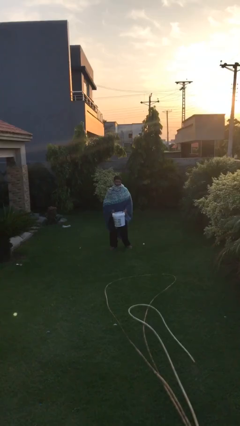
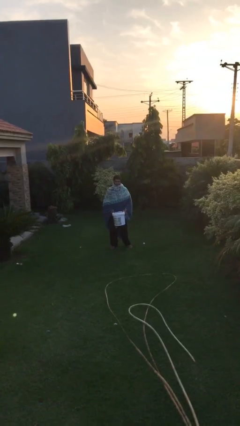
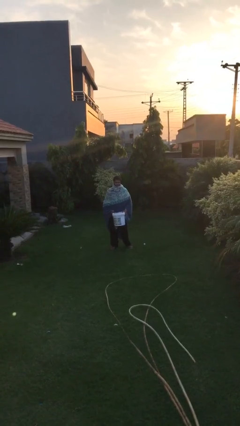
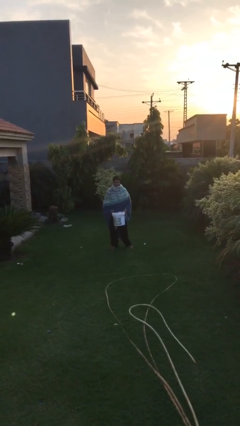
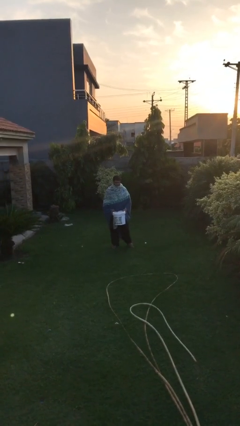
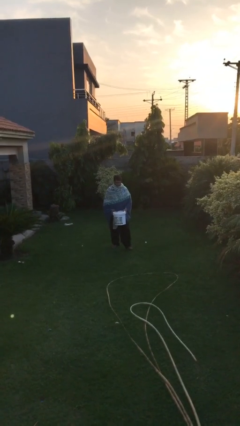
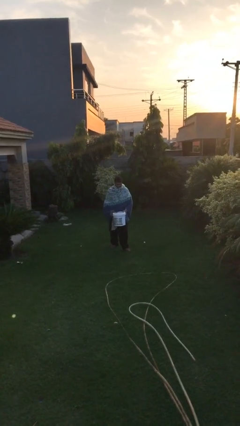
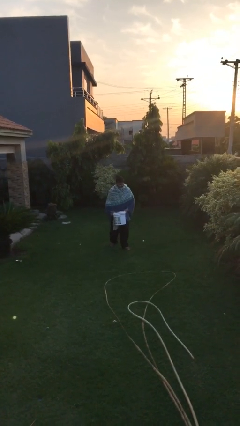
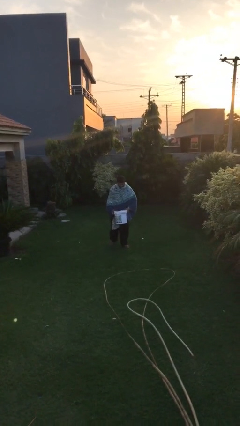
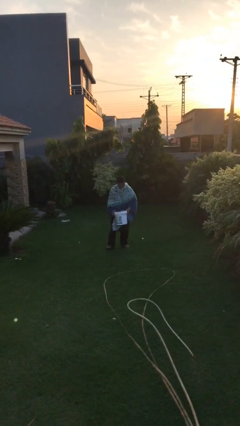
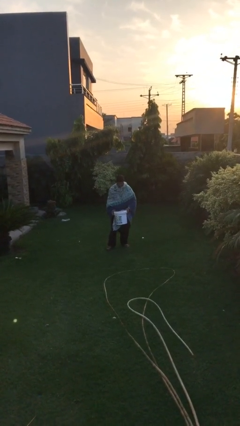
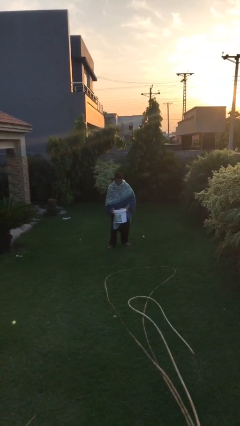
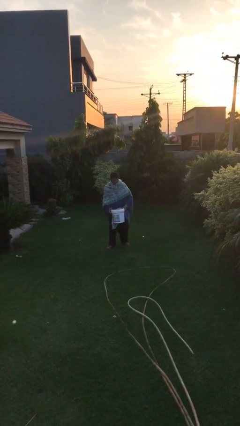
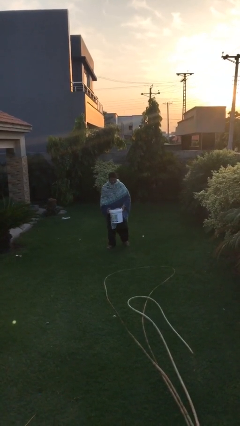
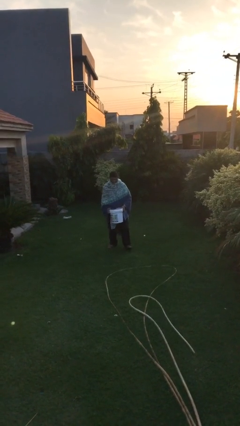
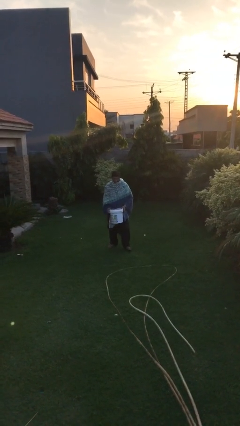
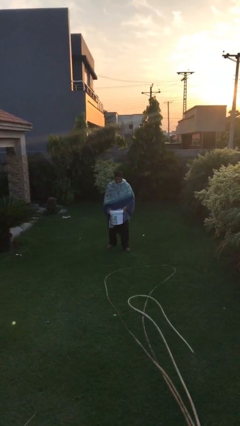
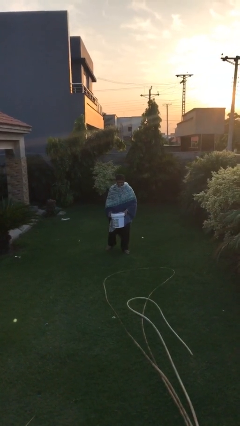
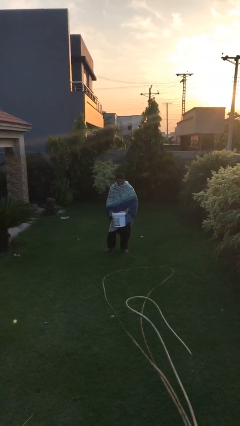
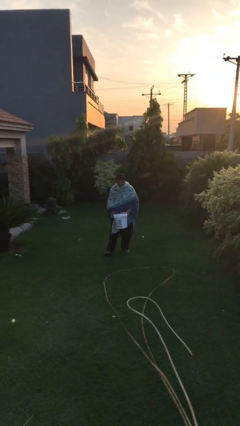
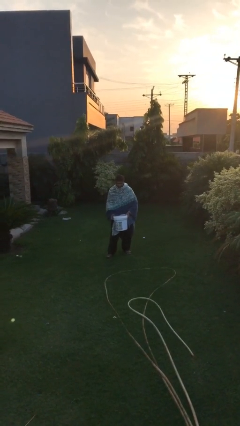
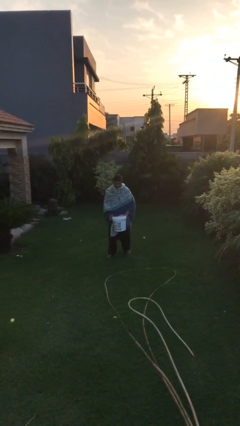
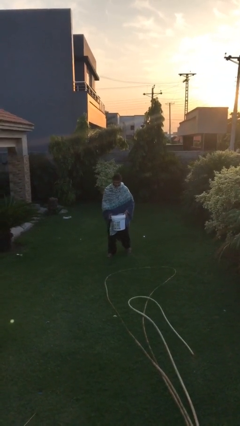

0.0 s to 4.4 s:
person carries heavy object

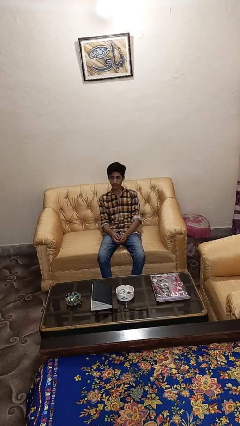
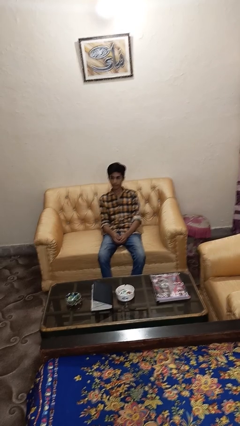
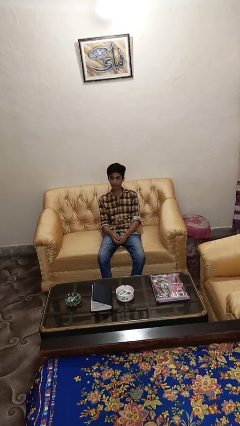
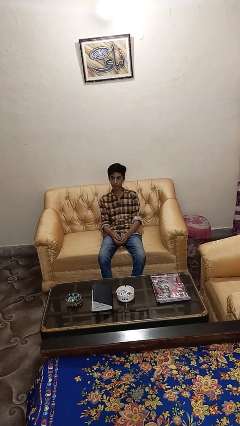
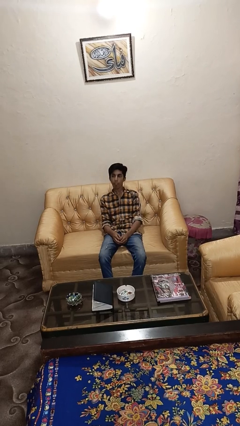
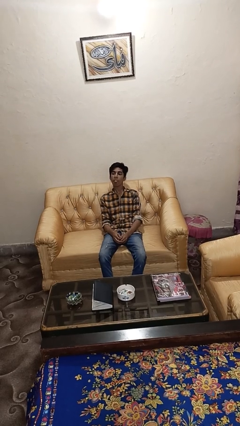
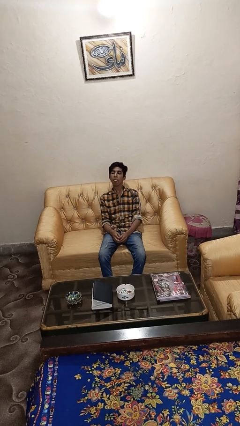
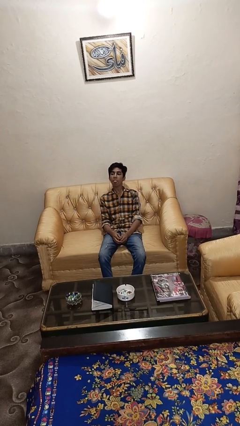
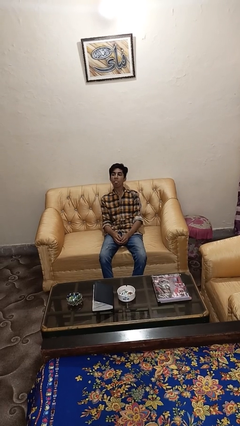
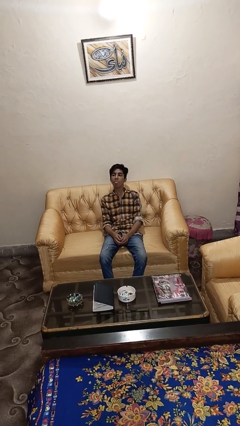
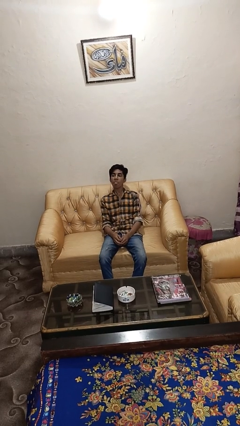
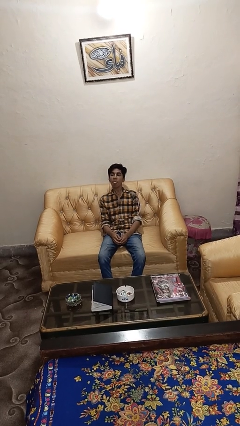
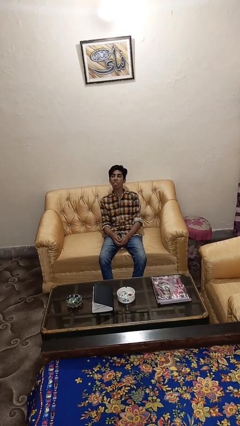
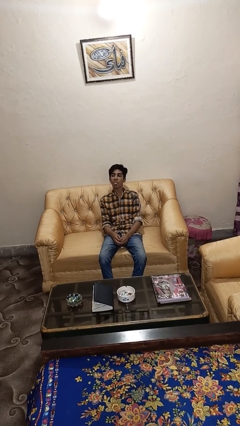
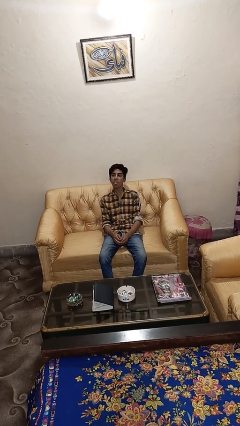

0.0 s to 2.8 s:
person sticks out tongue

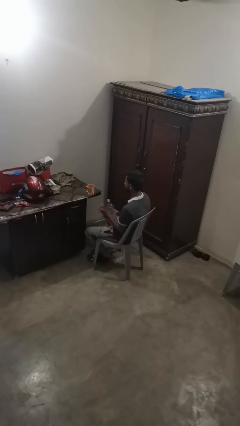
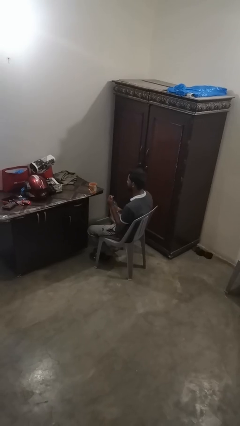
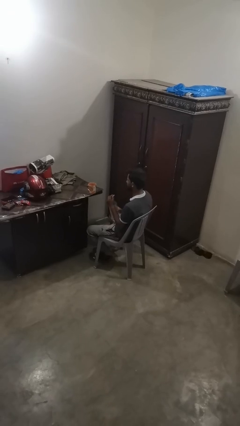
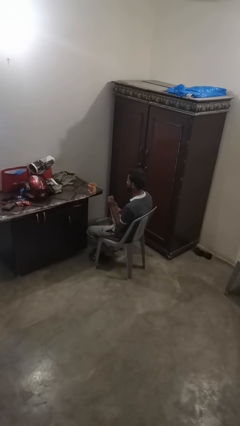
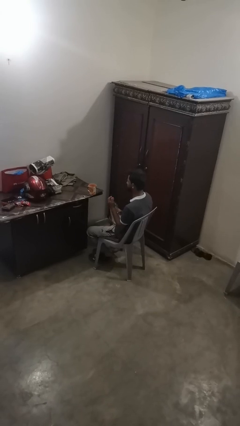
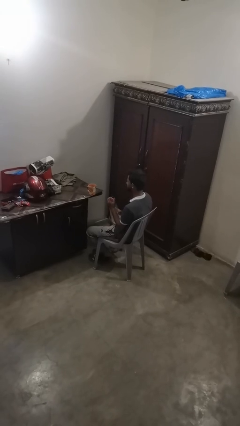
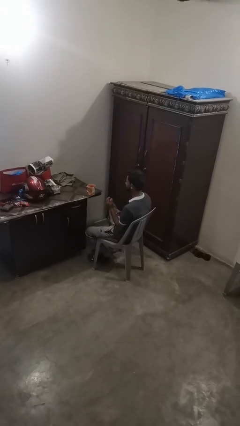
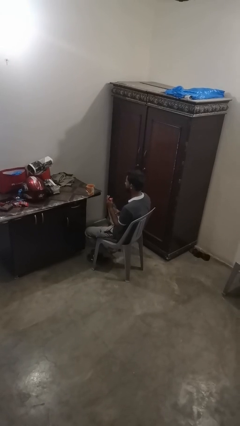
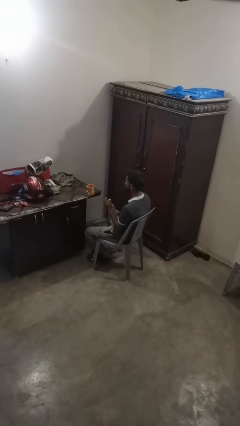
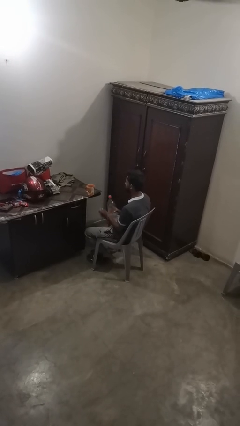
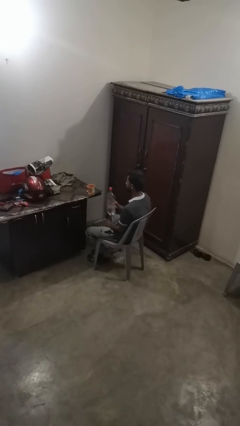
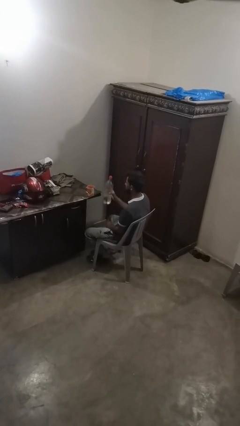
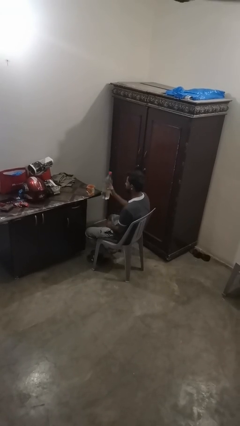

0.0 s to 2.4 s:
person screws lid to bottle

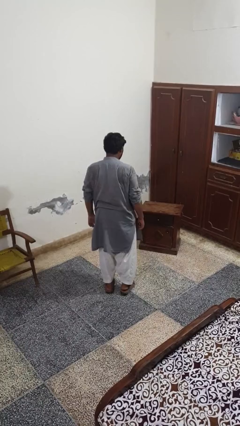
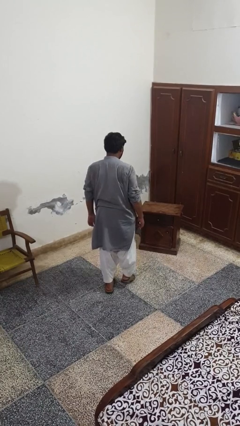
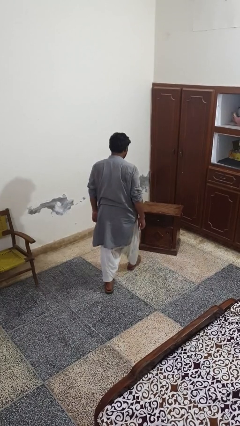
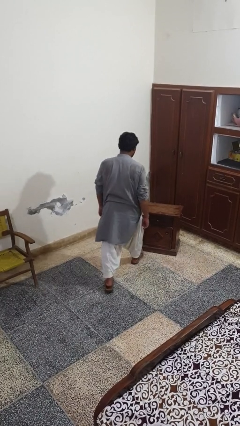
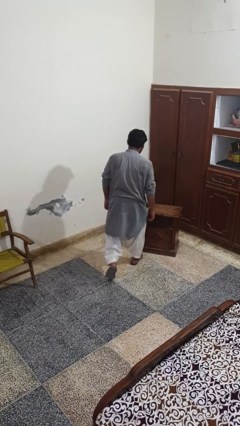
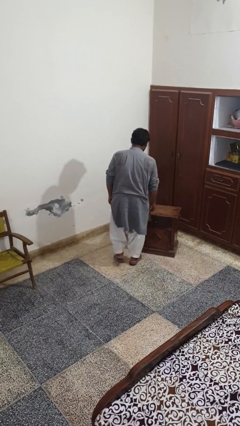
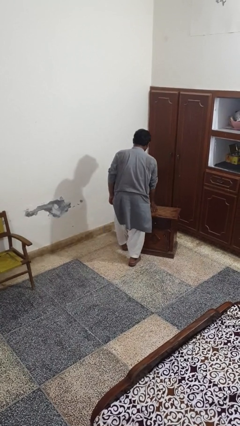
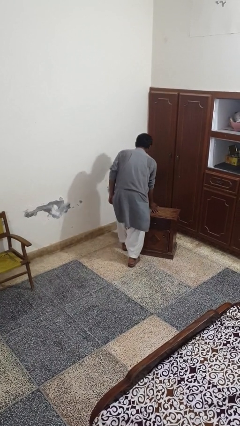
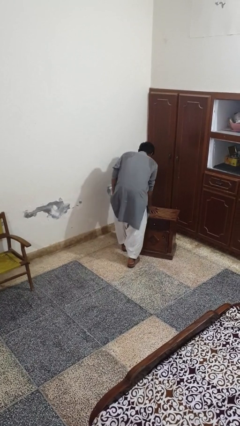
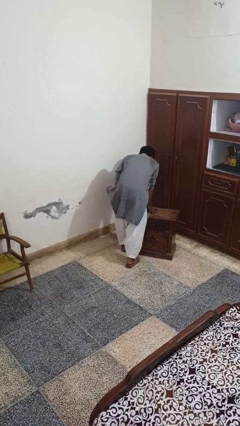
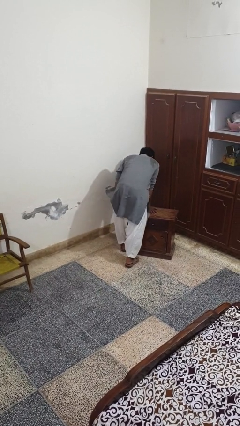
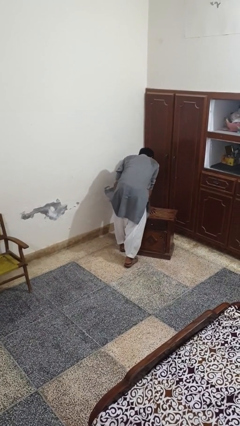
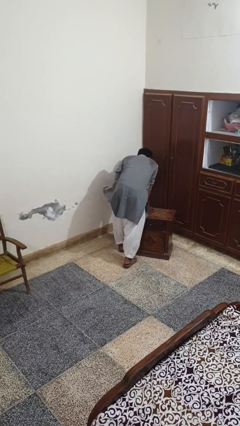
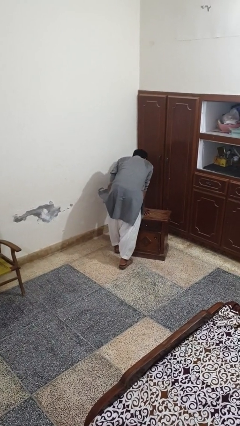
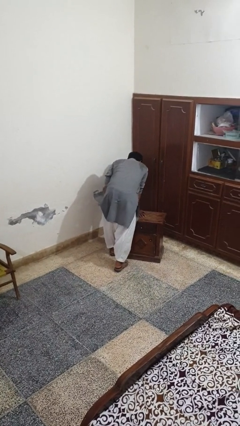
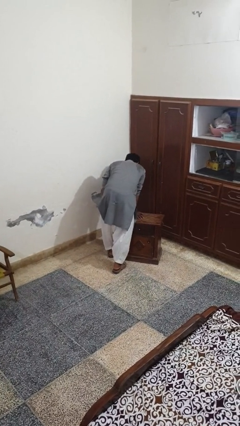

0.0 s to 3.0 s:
person bumps into table

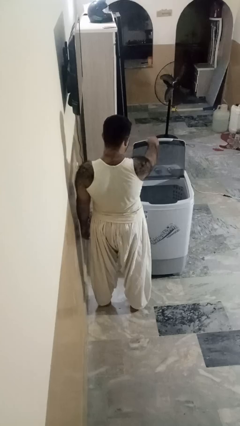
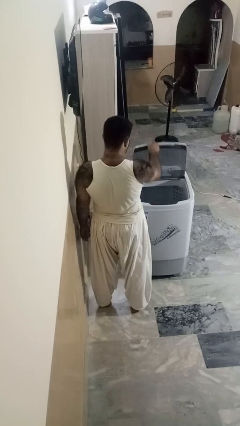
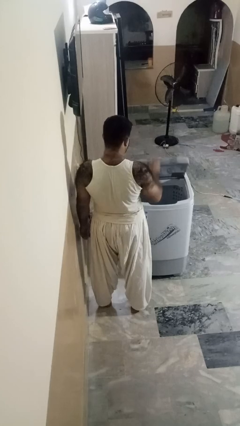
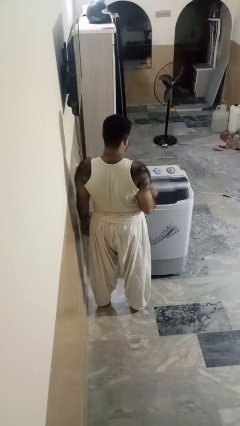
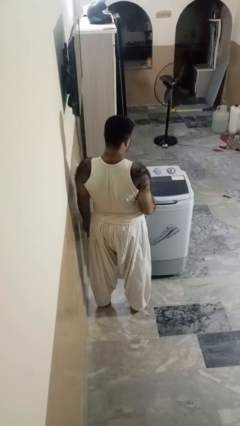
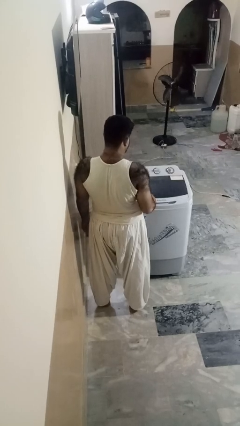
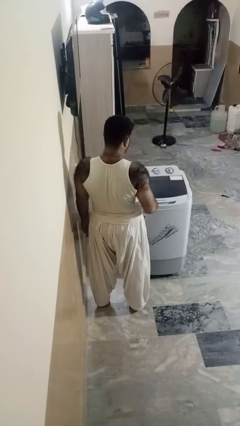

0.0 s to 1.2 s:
person closes clothes washer

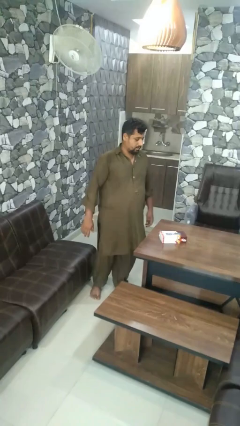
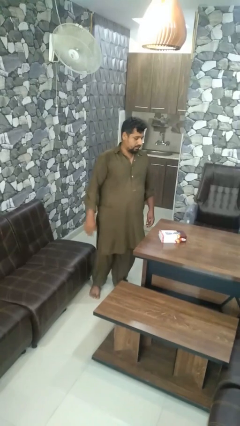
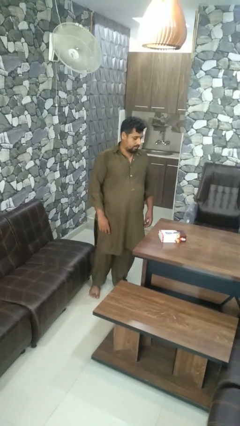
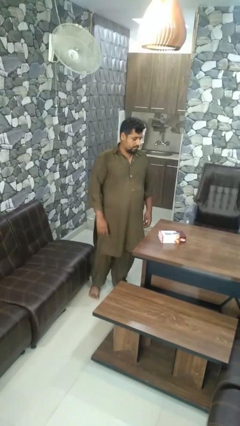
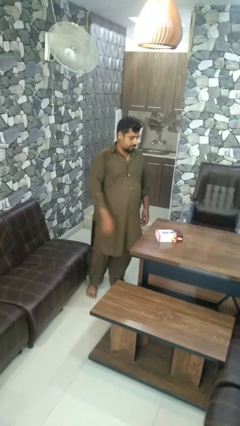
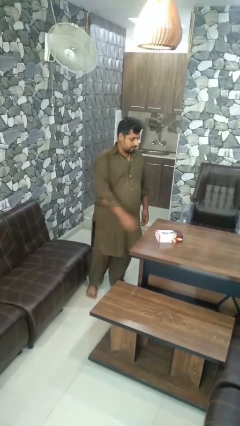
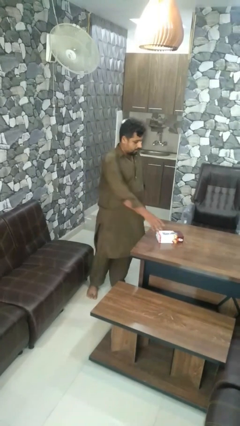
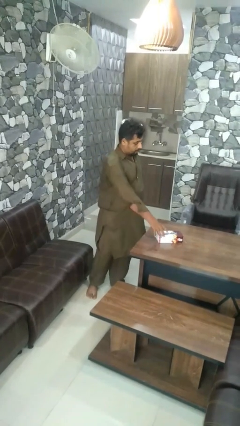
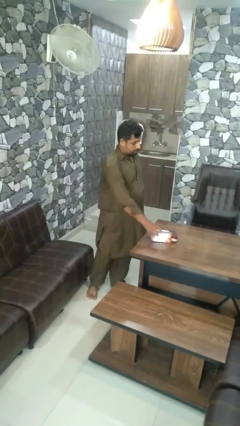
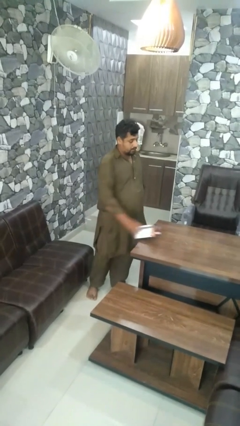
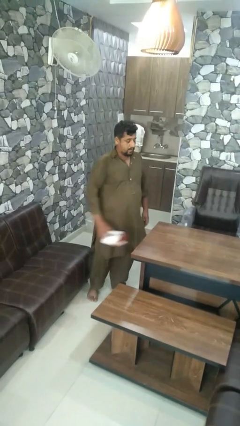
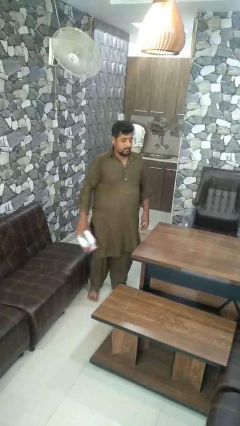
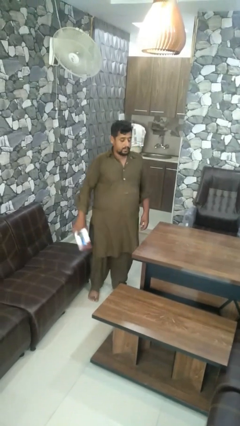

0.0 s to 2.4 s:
person picks up object from table

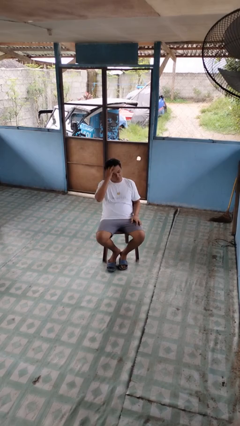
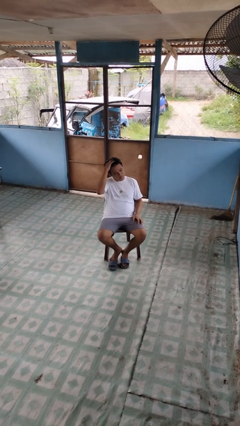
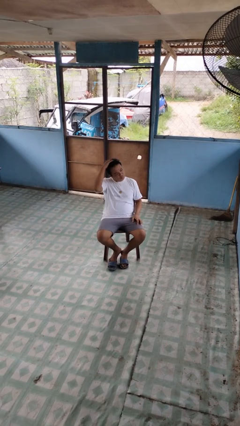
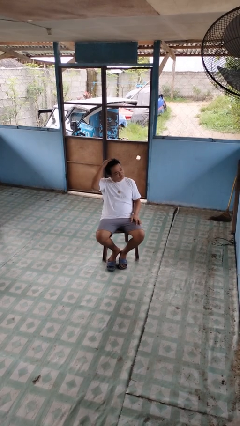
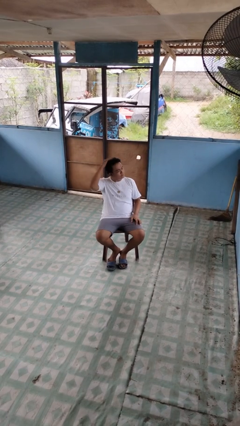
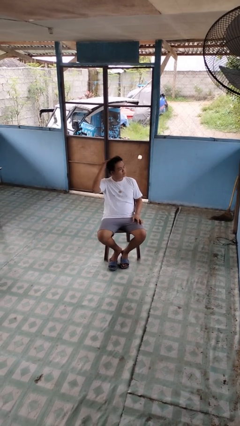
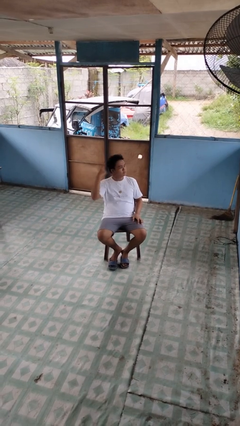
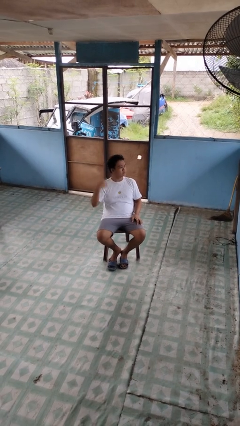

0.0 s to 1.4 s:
person strokes hair
